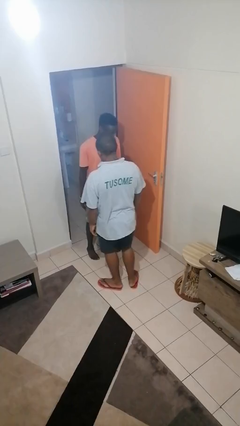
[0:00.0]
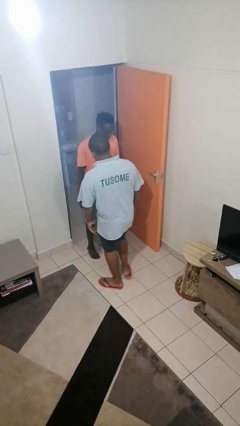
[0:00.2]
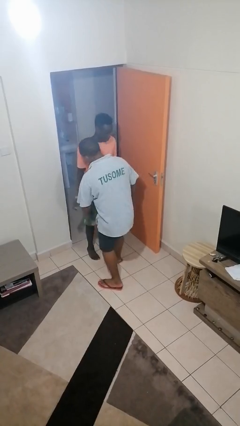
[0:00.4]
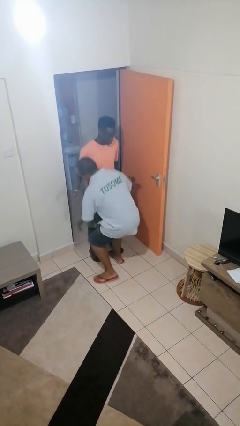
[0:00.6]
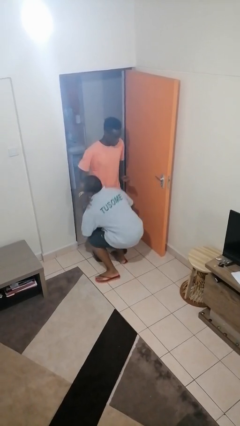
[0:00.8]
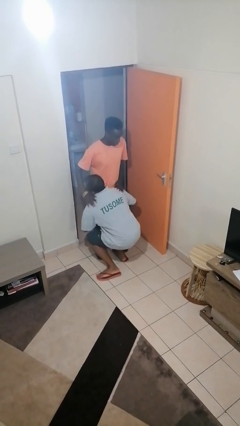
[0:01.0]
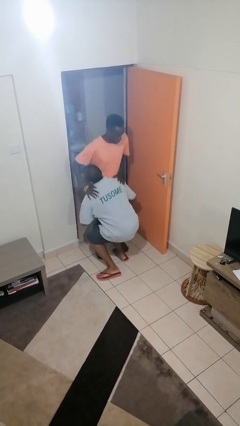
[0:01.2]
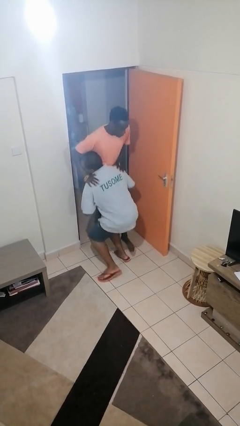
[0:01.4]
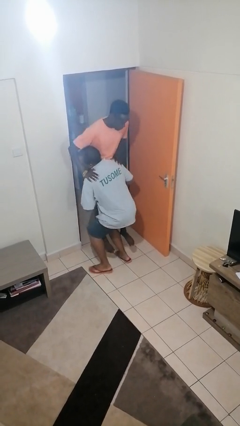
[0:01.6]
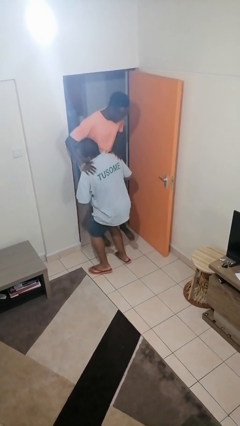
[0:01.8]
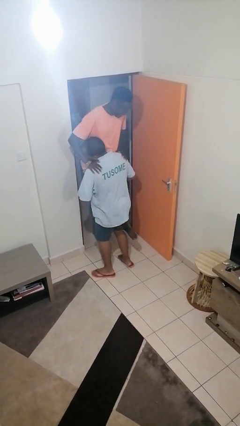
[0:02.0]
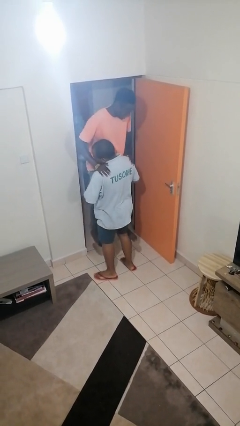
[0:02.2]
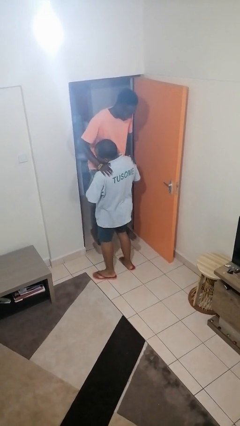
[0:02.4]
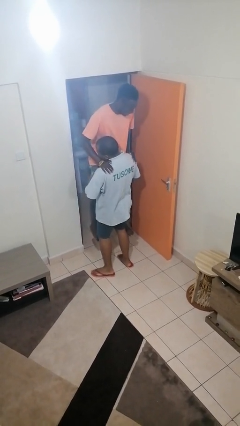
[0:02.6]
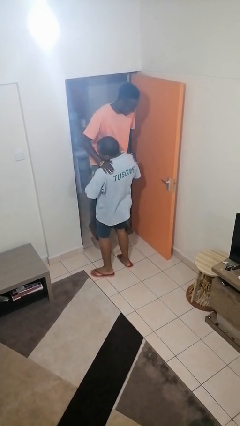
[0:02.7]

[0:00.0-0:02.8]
person carries person over shoulder

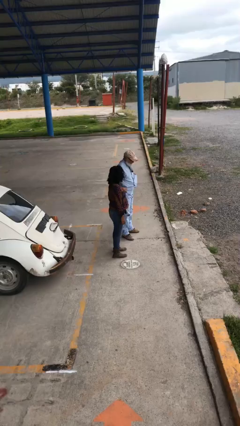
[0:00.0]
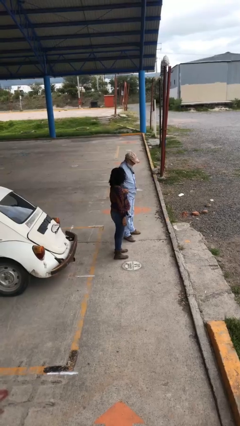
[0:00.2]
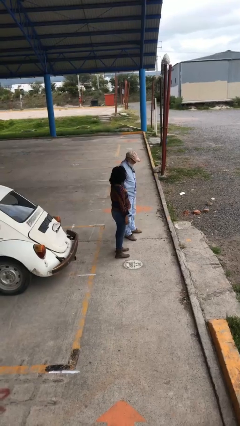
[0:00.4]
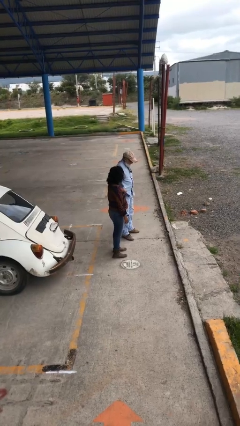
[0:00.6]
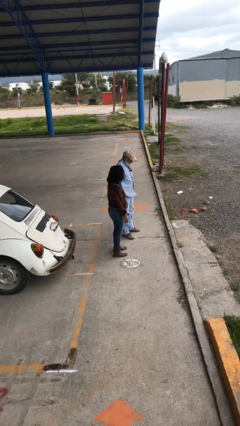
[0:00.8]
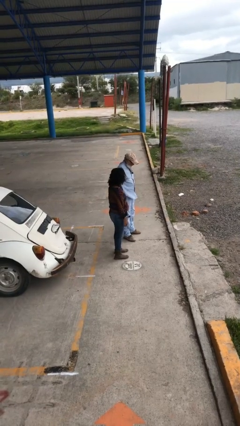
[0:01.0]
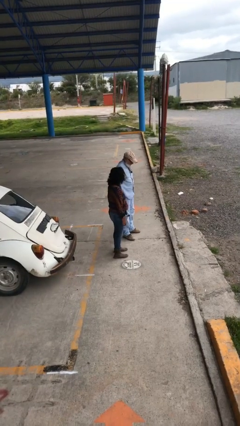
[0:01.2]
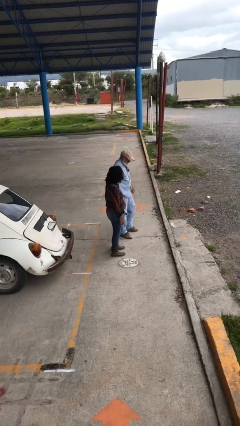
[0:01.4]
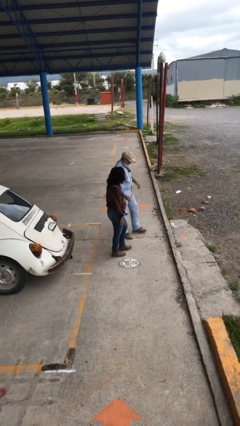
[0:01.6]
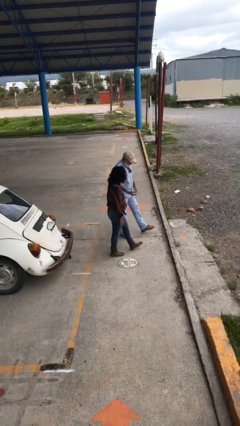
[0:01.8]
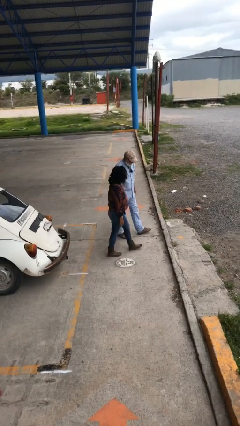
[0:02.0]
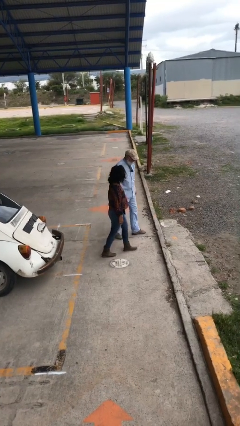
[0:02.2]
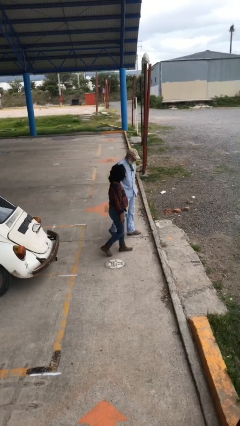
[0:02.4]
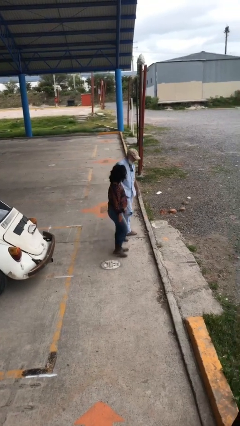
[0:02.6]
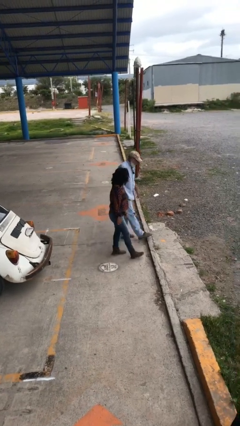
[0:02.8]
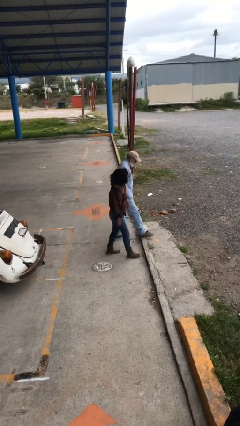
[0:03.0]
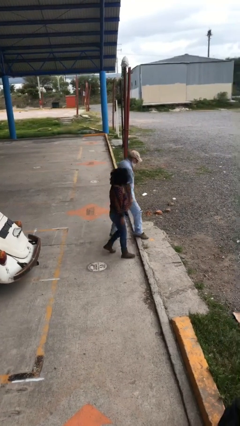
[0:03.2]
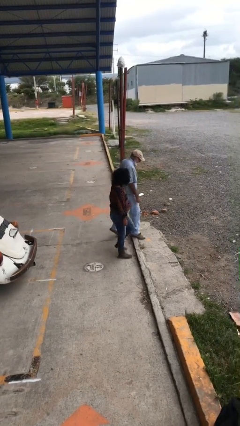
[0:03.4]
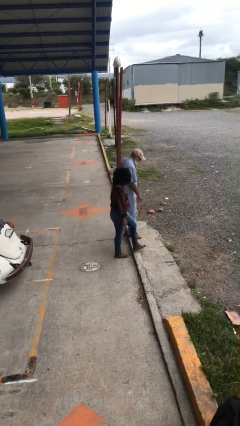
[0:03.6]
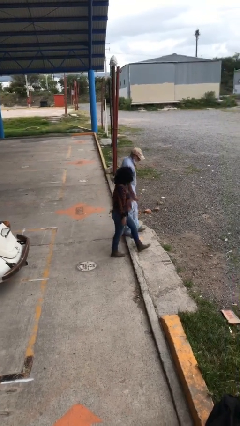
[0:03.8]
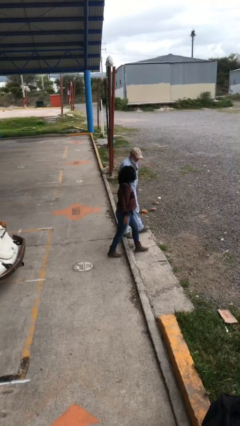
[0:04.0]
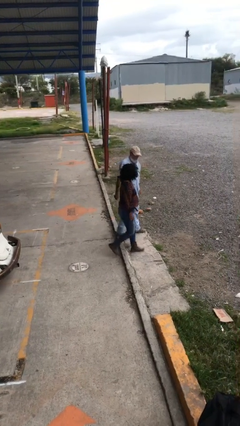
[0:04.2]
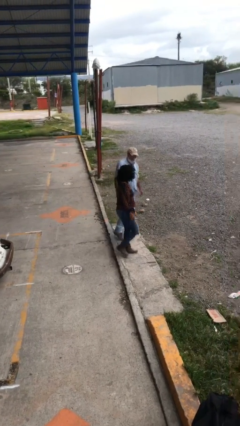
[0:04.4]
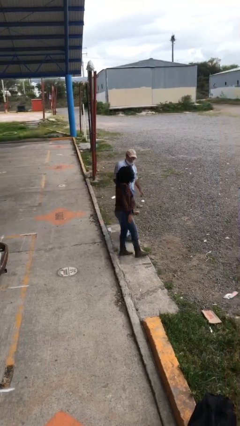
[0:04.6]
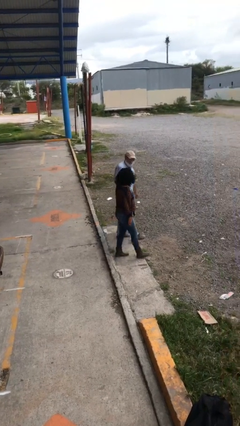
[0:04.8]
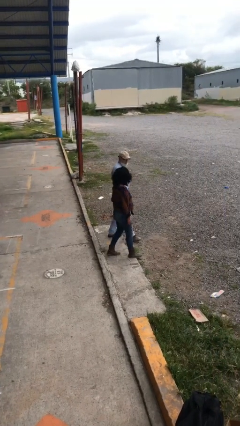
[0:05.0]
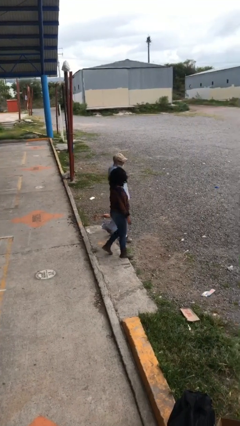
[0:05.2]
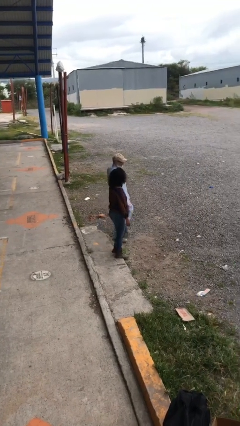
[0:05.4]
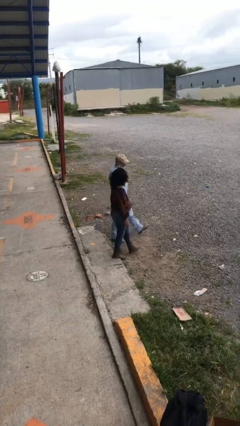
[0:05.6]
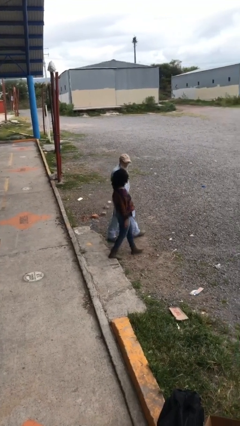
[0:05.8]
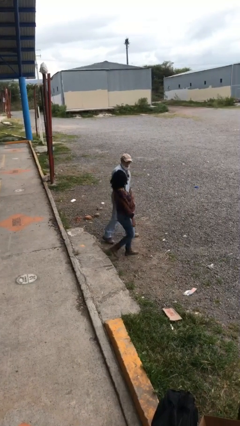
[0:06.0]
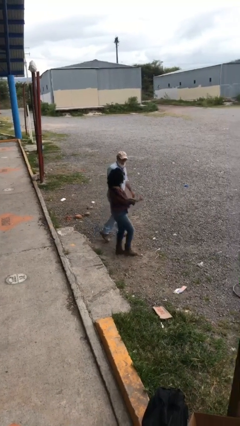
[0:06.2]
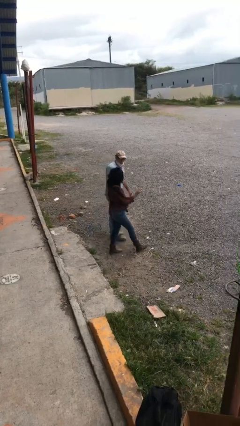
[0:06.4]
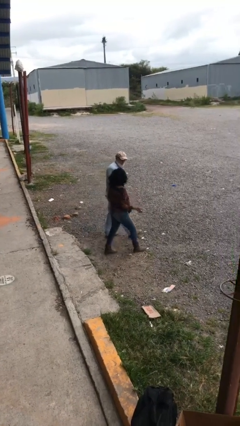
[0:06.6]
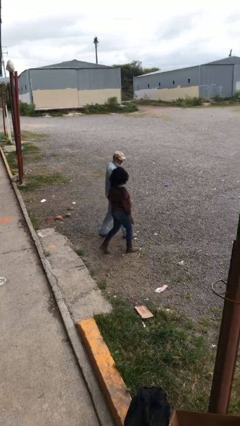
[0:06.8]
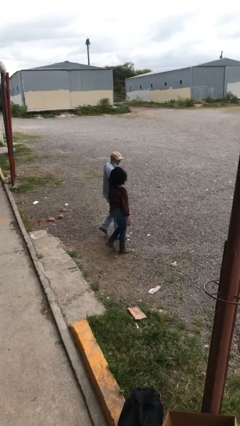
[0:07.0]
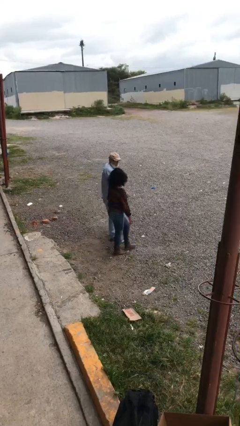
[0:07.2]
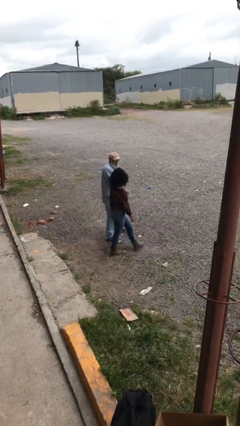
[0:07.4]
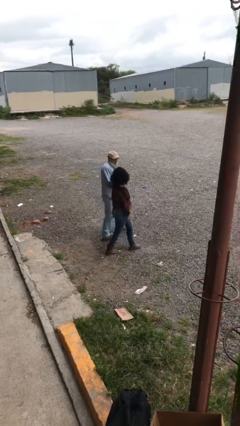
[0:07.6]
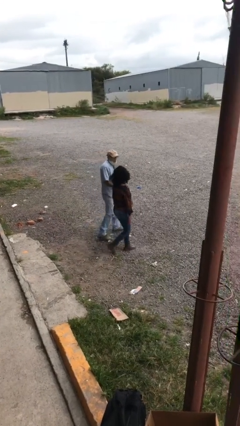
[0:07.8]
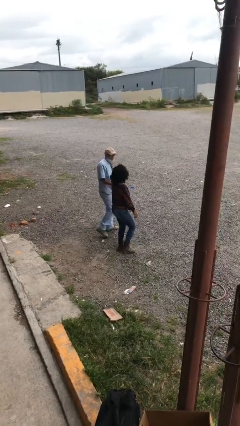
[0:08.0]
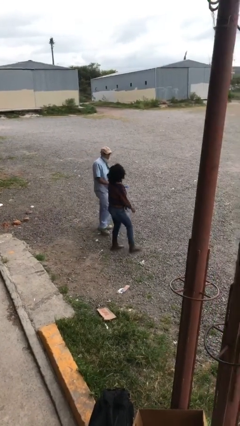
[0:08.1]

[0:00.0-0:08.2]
person talks to person

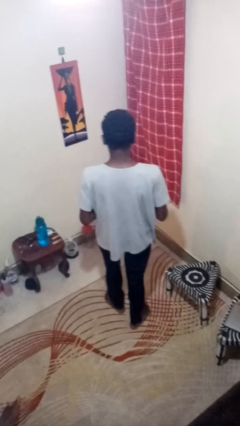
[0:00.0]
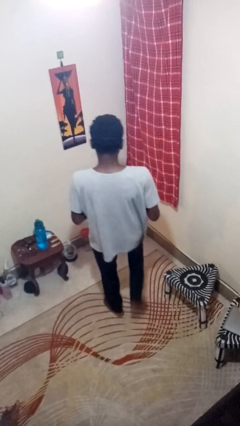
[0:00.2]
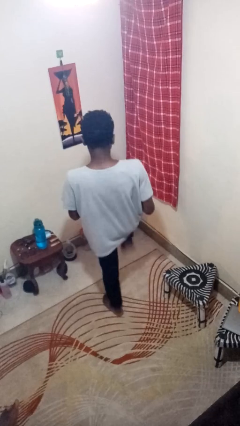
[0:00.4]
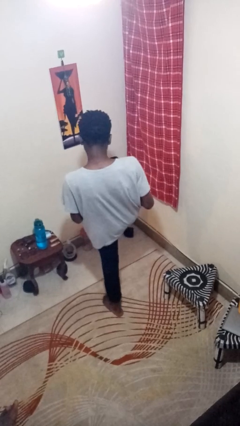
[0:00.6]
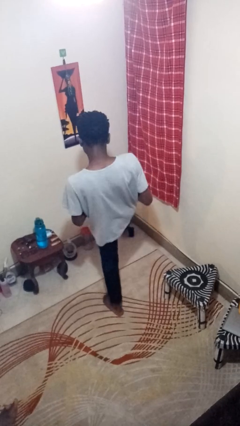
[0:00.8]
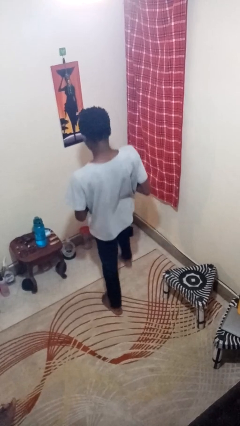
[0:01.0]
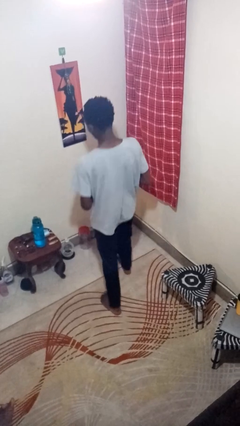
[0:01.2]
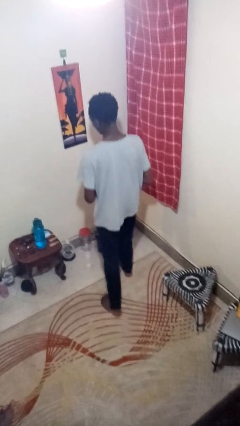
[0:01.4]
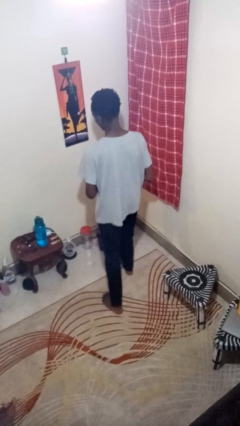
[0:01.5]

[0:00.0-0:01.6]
person karate kicks

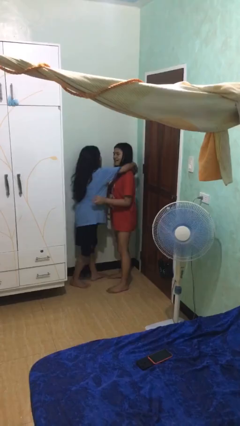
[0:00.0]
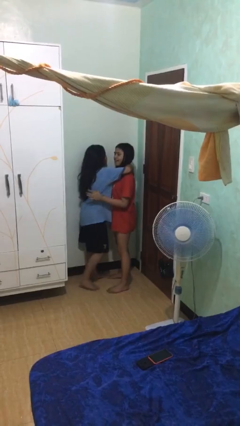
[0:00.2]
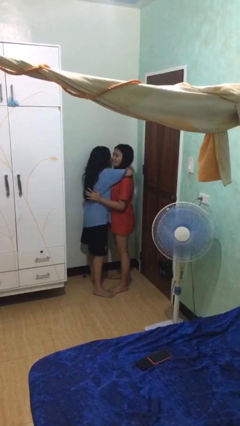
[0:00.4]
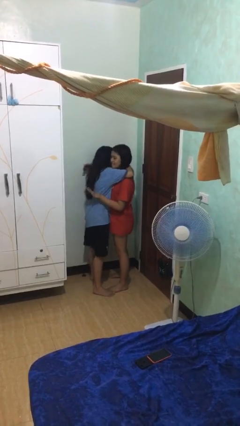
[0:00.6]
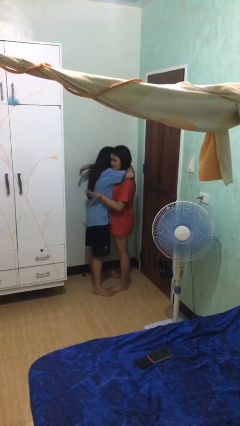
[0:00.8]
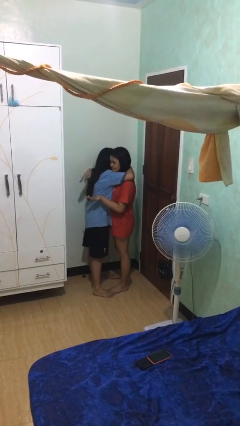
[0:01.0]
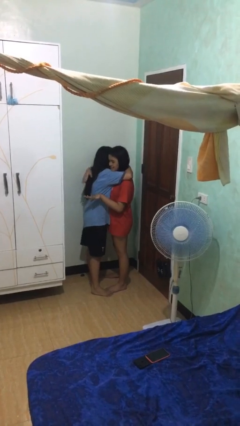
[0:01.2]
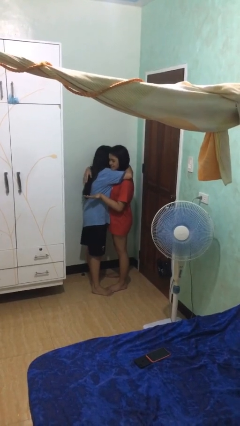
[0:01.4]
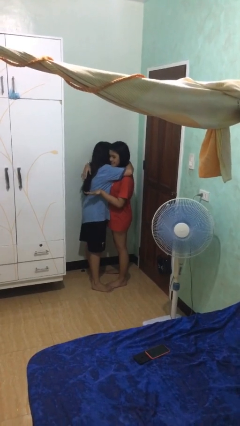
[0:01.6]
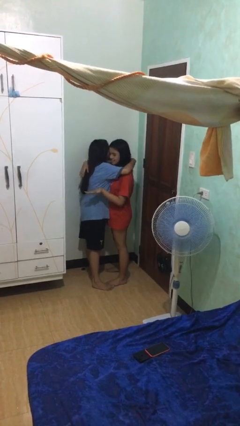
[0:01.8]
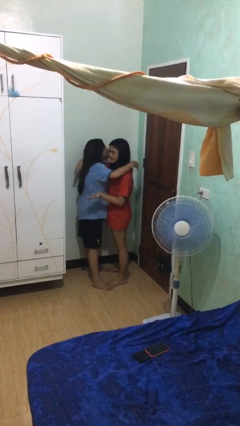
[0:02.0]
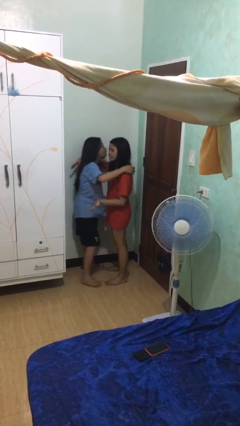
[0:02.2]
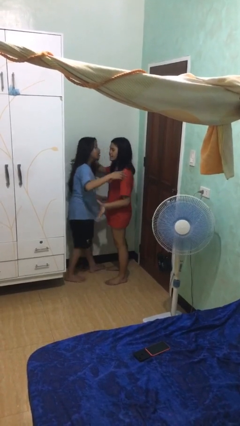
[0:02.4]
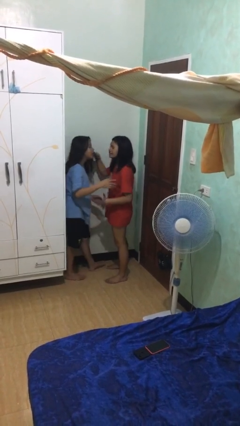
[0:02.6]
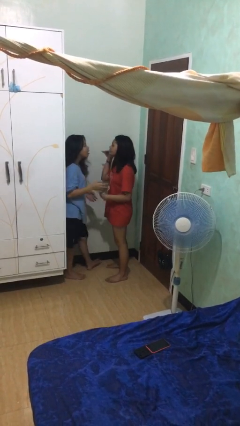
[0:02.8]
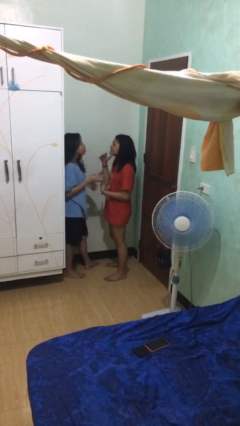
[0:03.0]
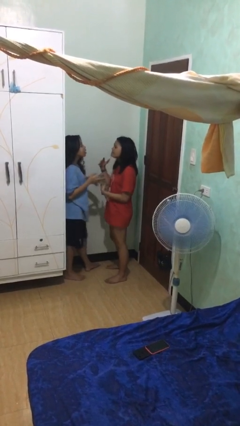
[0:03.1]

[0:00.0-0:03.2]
person embraces person

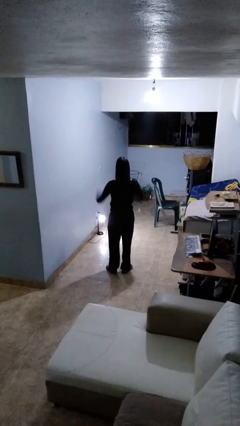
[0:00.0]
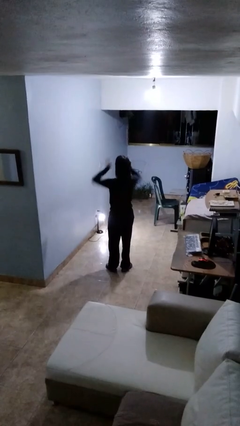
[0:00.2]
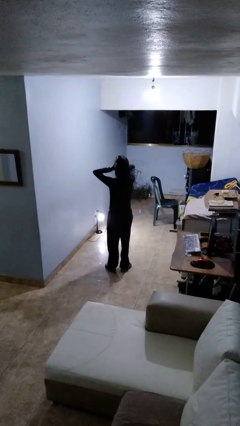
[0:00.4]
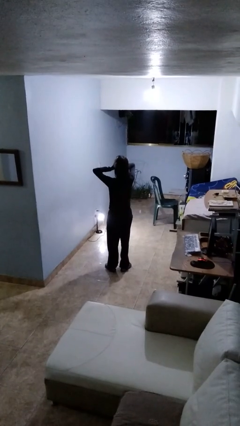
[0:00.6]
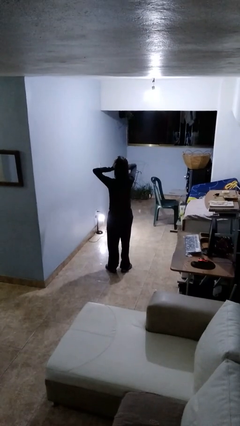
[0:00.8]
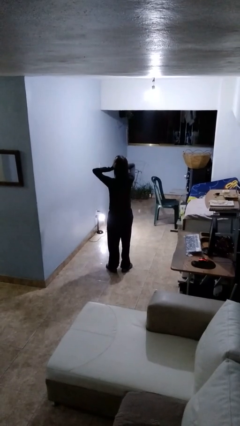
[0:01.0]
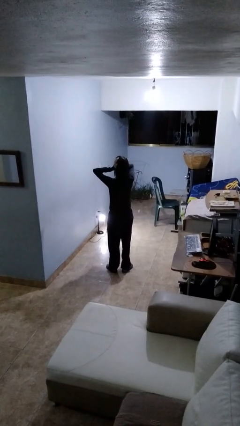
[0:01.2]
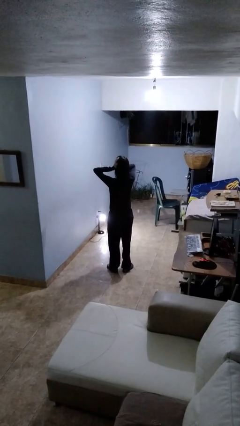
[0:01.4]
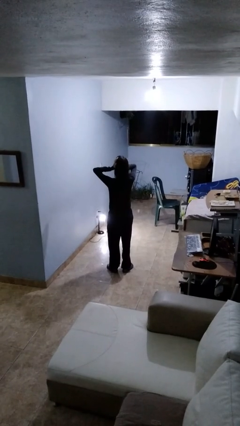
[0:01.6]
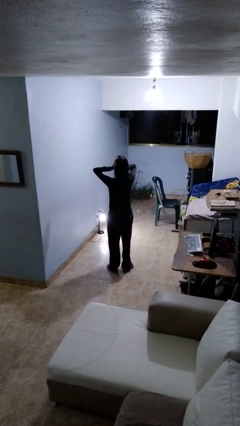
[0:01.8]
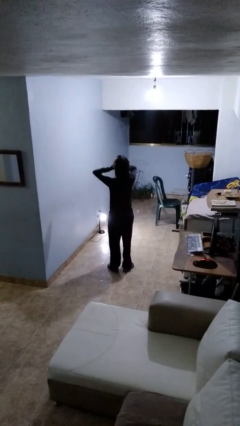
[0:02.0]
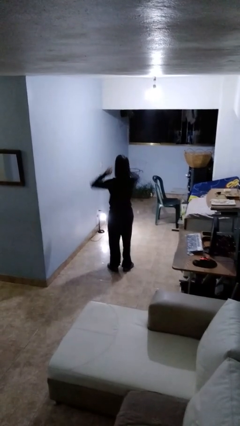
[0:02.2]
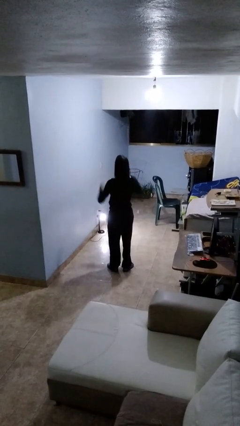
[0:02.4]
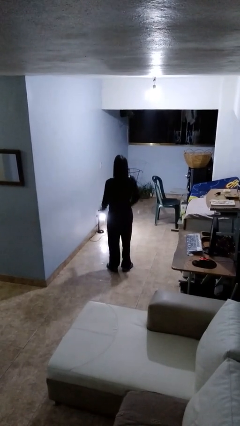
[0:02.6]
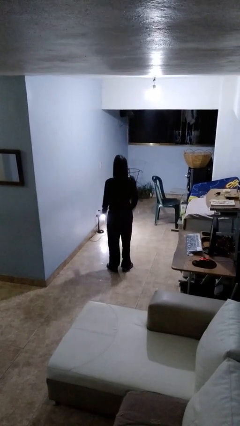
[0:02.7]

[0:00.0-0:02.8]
person puts fingers in ear
